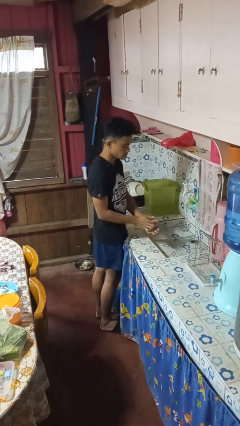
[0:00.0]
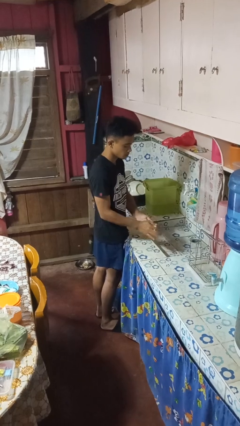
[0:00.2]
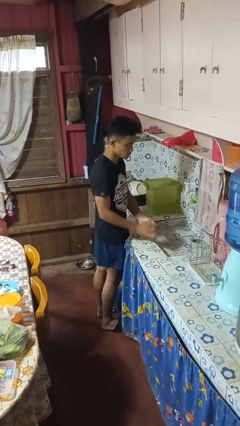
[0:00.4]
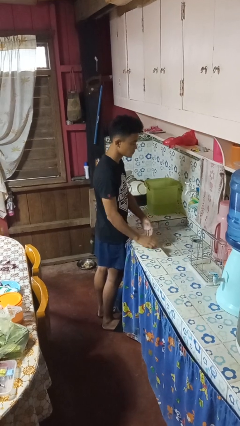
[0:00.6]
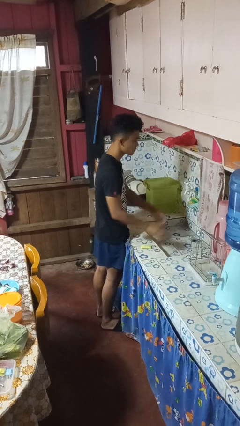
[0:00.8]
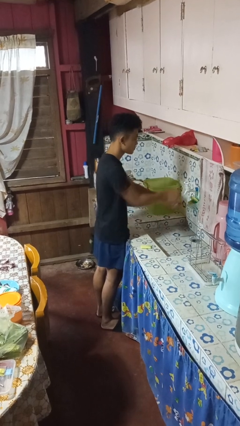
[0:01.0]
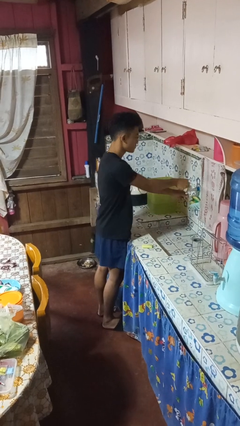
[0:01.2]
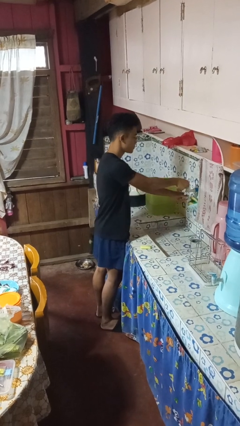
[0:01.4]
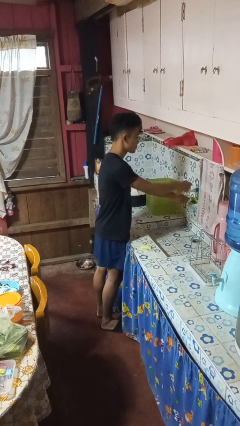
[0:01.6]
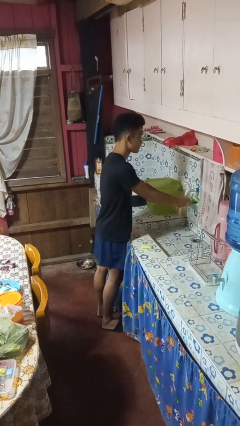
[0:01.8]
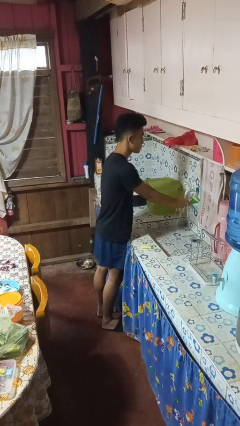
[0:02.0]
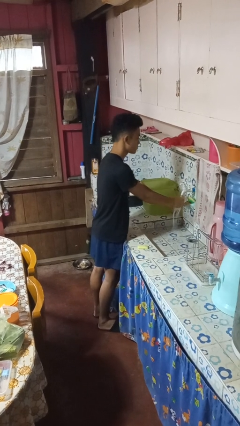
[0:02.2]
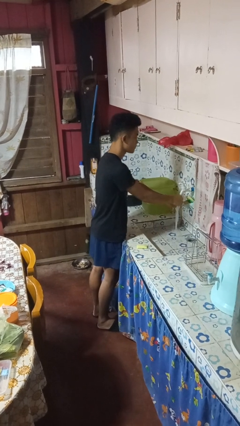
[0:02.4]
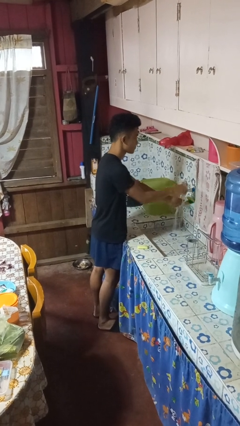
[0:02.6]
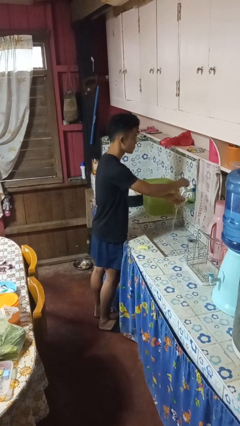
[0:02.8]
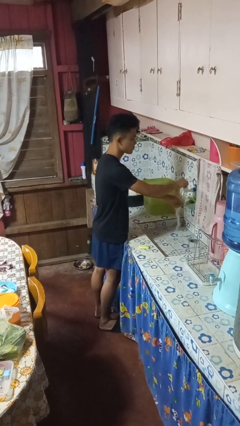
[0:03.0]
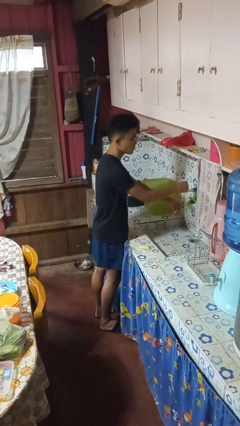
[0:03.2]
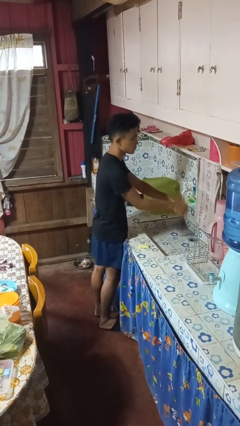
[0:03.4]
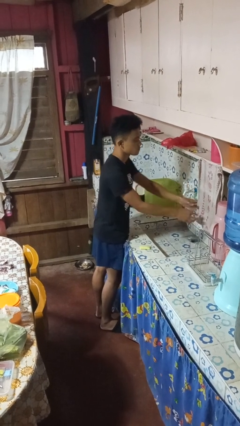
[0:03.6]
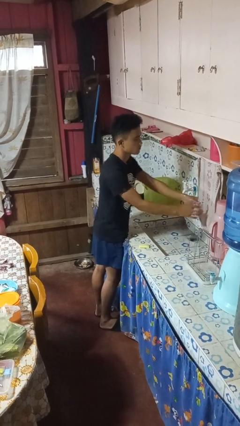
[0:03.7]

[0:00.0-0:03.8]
person washes hands

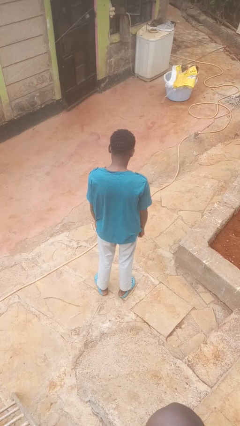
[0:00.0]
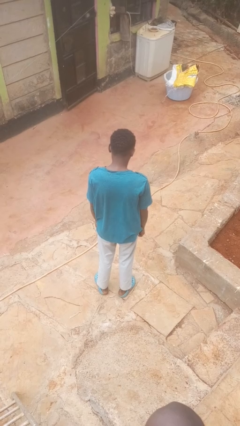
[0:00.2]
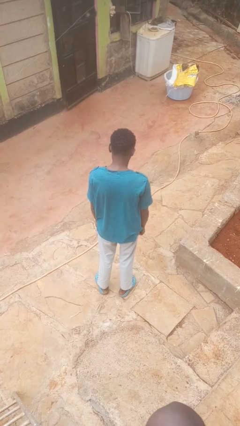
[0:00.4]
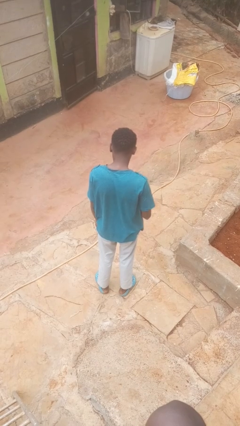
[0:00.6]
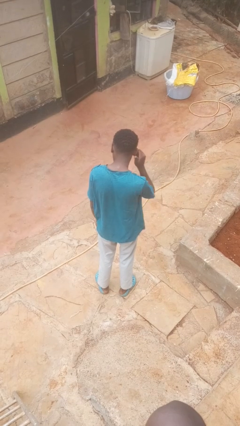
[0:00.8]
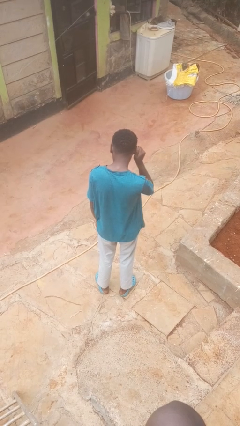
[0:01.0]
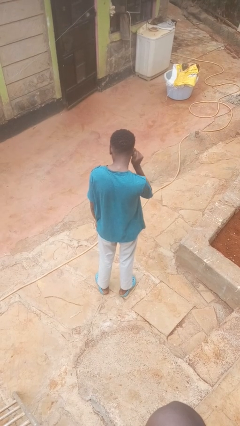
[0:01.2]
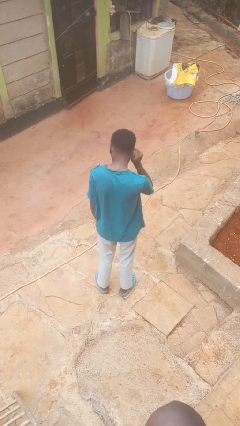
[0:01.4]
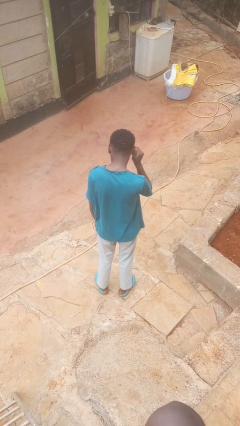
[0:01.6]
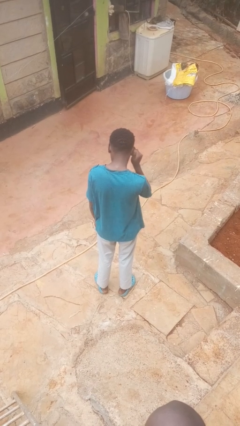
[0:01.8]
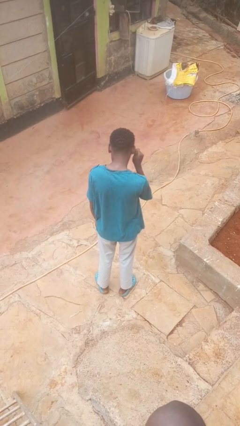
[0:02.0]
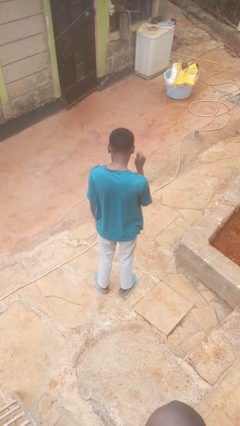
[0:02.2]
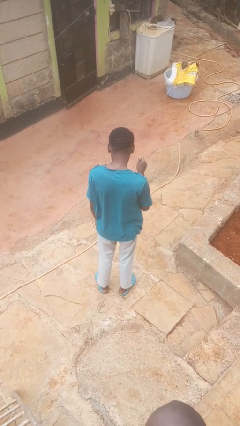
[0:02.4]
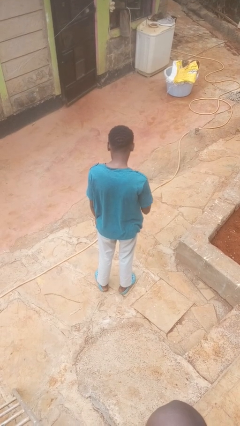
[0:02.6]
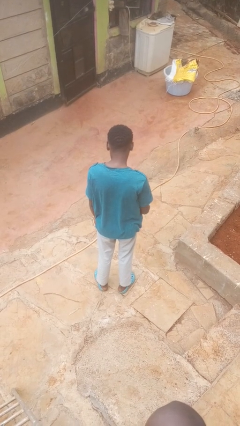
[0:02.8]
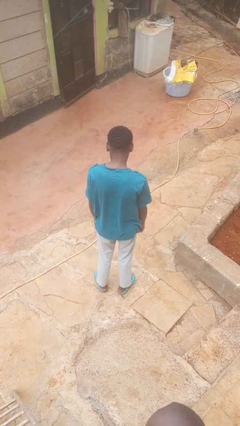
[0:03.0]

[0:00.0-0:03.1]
person touches earlobe

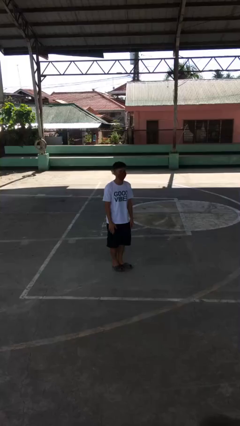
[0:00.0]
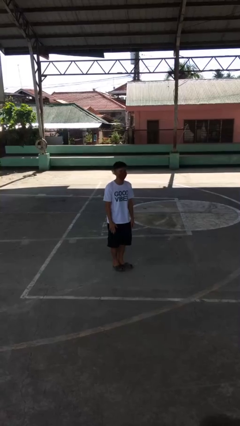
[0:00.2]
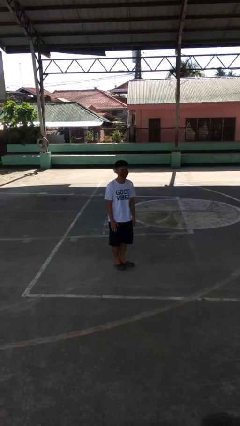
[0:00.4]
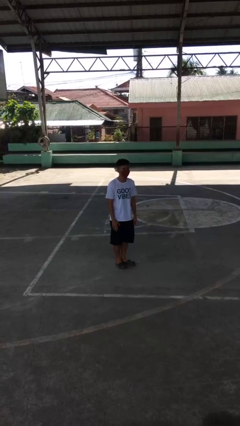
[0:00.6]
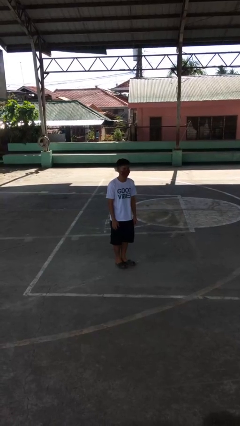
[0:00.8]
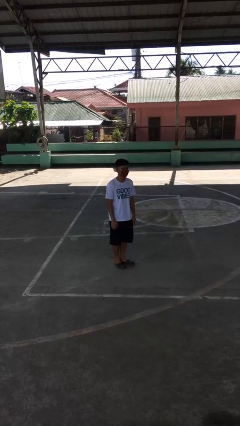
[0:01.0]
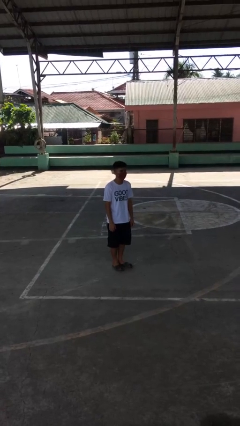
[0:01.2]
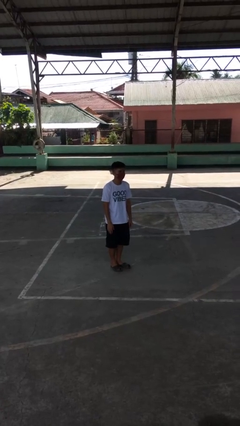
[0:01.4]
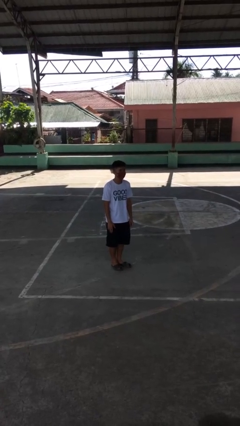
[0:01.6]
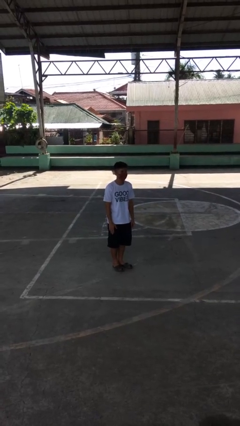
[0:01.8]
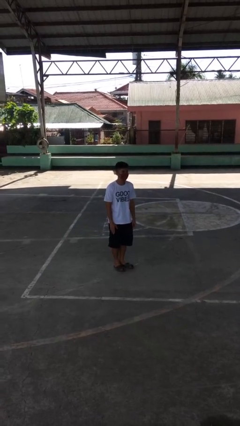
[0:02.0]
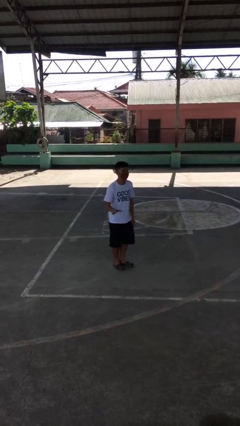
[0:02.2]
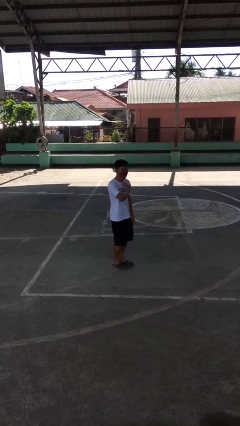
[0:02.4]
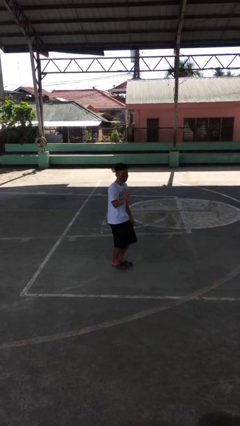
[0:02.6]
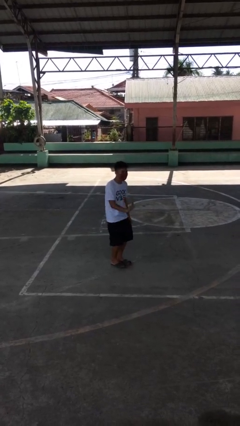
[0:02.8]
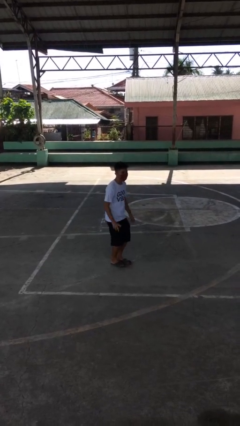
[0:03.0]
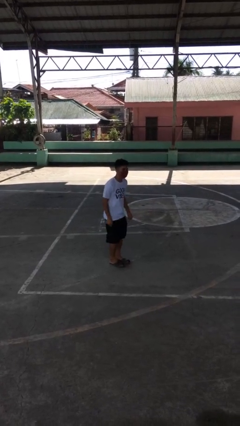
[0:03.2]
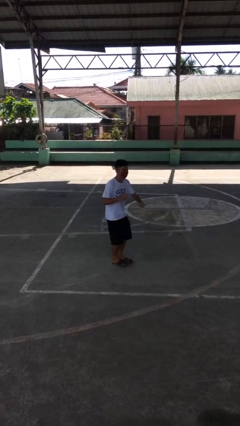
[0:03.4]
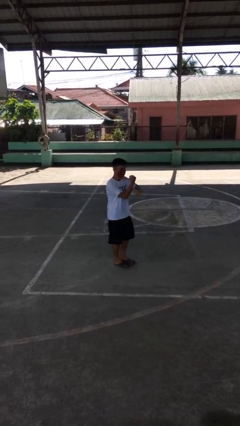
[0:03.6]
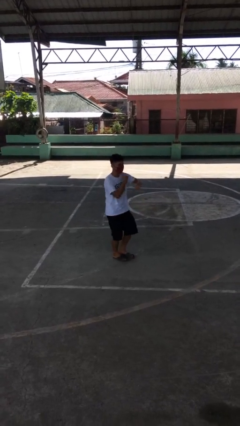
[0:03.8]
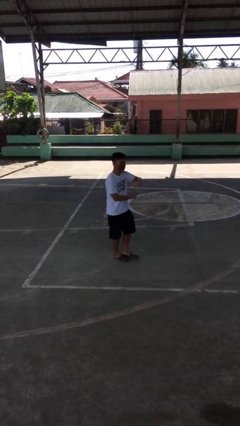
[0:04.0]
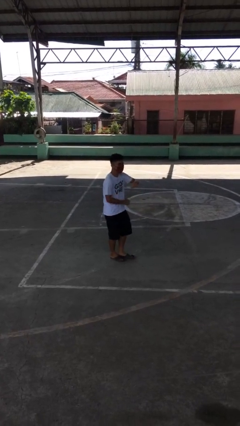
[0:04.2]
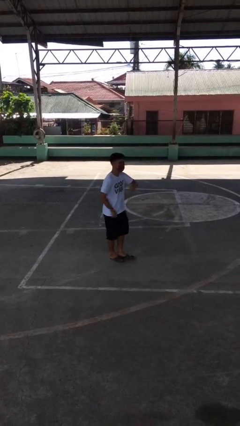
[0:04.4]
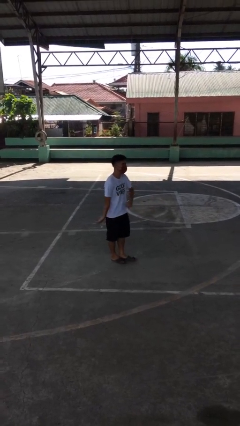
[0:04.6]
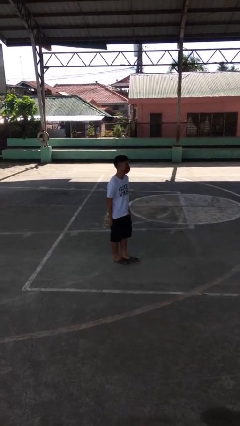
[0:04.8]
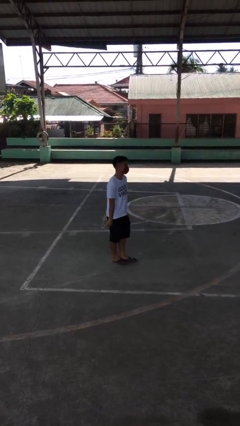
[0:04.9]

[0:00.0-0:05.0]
person dances in place

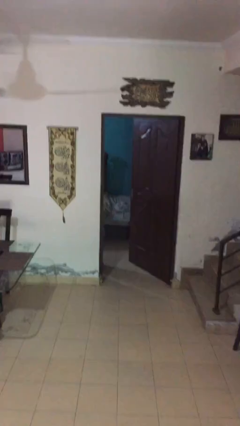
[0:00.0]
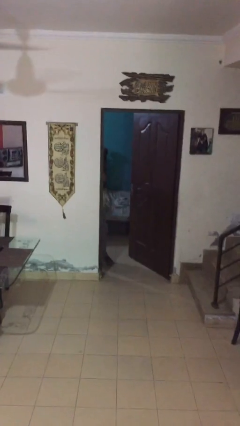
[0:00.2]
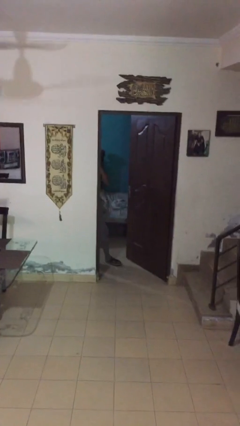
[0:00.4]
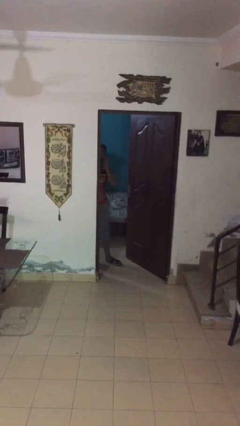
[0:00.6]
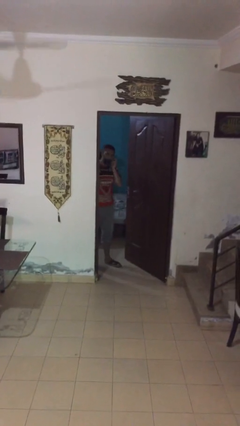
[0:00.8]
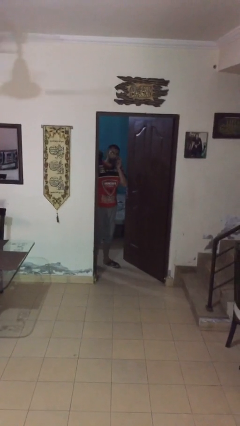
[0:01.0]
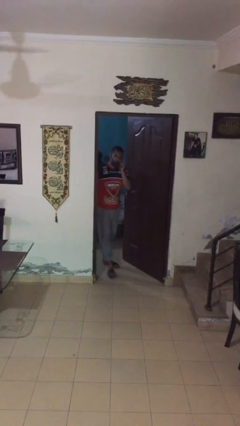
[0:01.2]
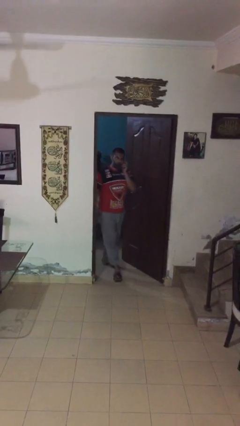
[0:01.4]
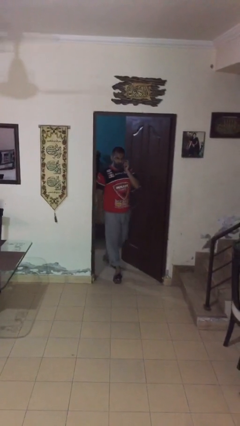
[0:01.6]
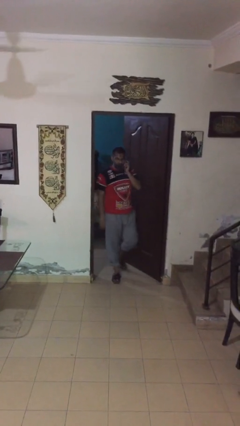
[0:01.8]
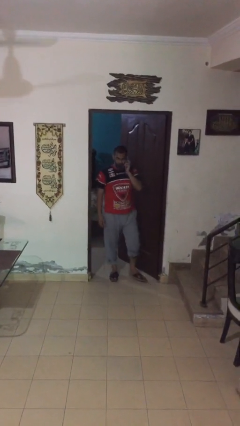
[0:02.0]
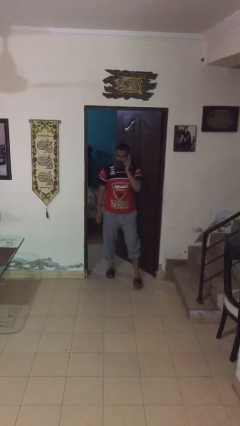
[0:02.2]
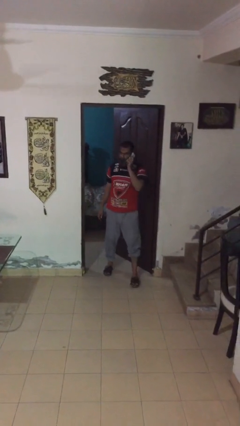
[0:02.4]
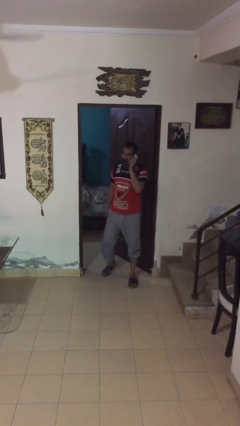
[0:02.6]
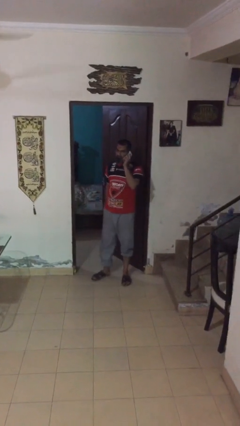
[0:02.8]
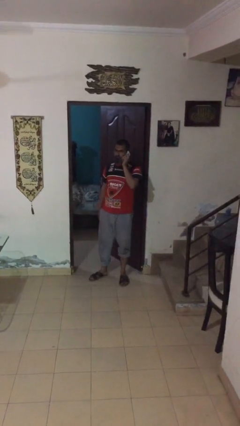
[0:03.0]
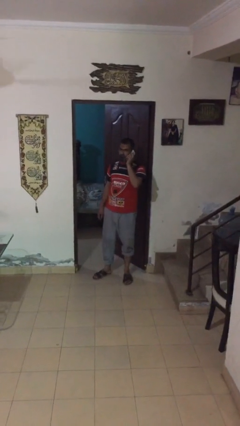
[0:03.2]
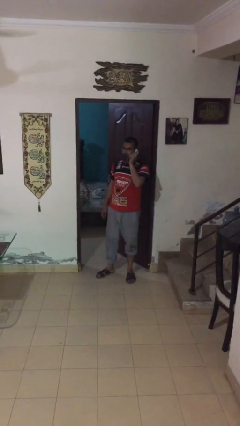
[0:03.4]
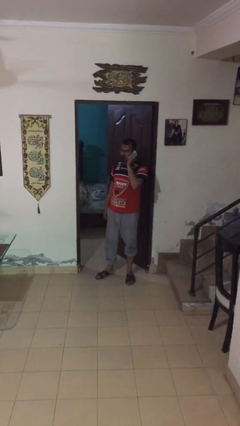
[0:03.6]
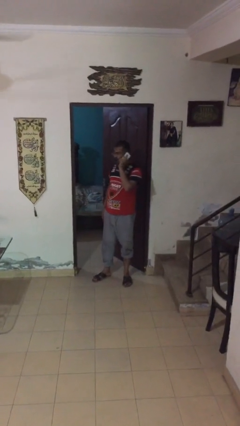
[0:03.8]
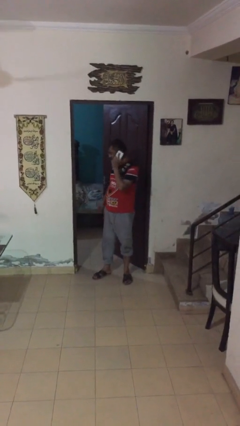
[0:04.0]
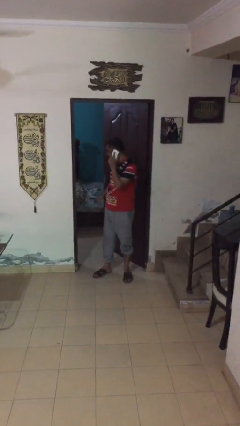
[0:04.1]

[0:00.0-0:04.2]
person enters scene through structure

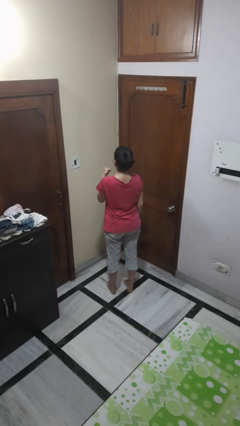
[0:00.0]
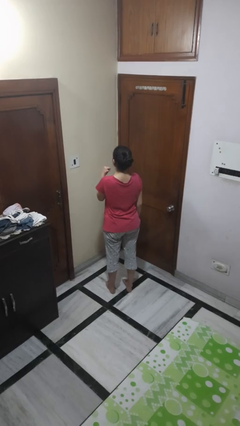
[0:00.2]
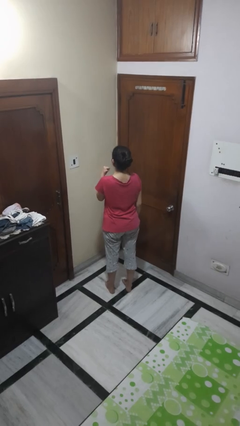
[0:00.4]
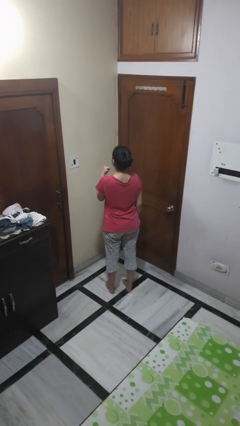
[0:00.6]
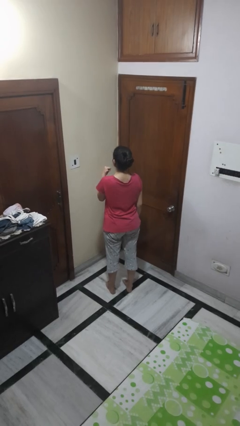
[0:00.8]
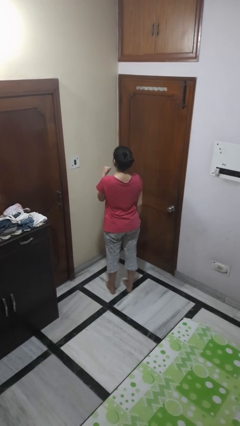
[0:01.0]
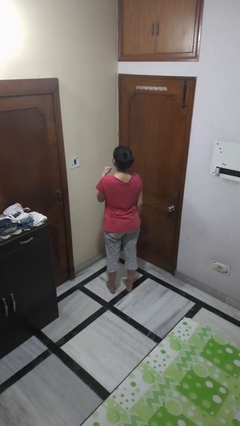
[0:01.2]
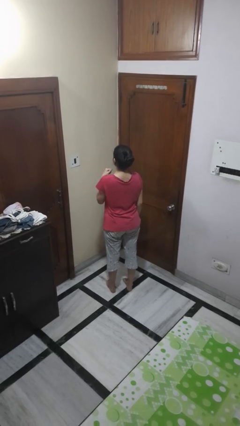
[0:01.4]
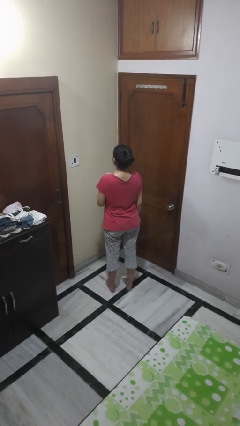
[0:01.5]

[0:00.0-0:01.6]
person gestures cut
